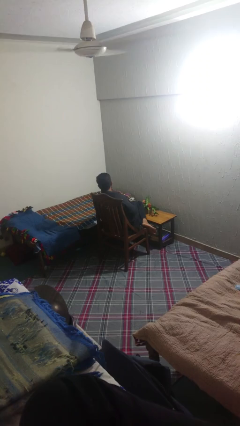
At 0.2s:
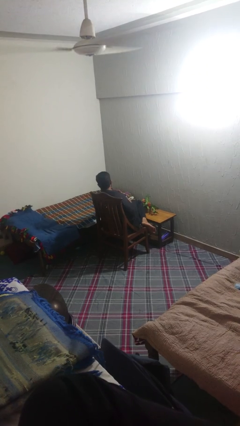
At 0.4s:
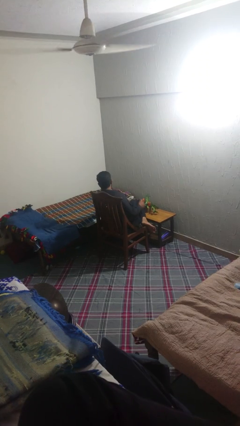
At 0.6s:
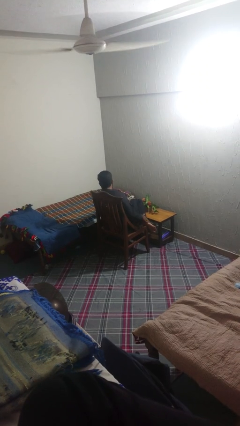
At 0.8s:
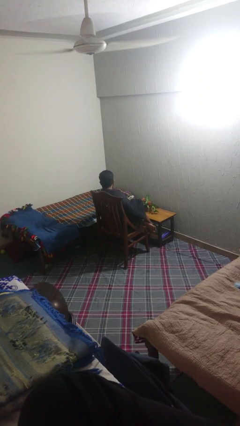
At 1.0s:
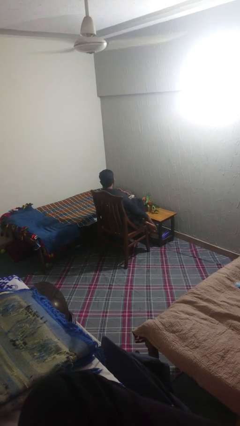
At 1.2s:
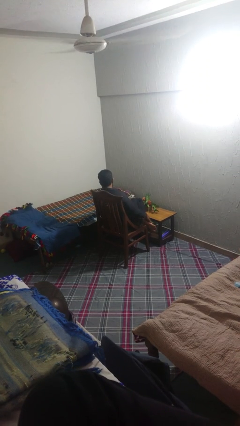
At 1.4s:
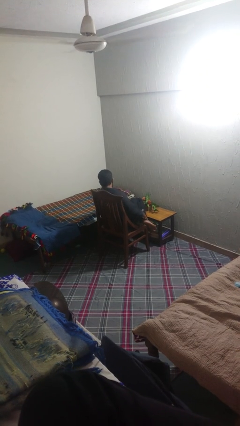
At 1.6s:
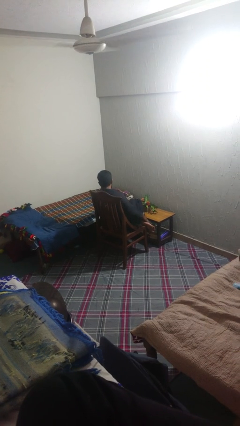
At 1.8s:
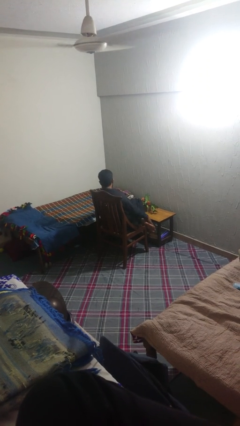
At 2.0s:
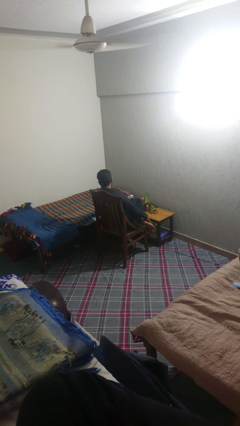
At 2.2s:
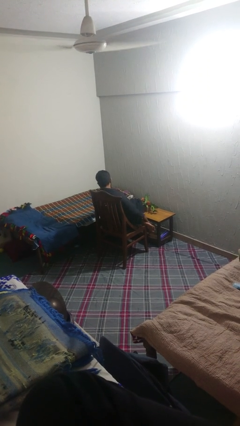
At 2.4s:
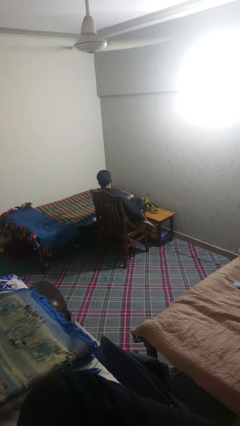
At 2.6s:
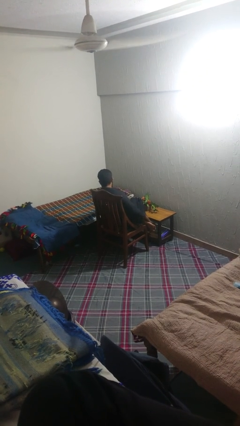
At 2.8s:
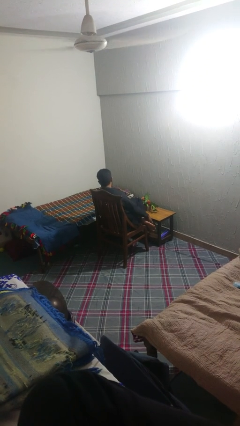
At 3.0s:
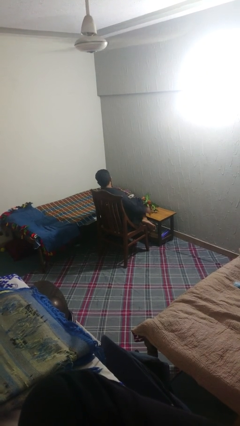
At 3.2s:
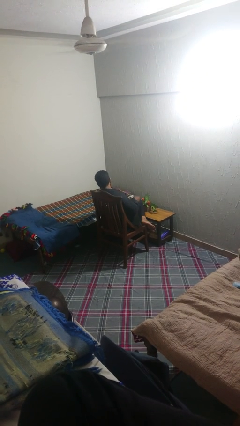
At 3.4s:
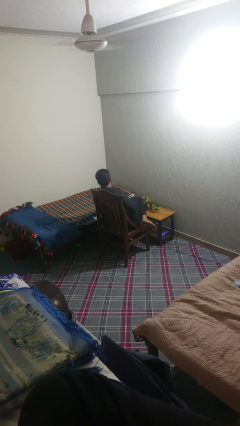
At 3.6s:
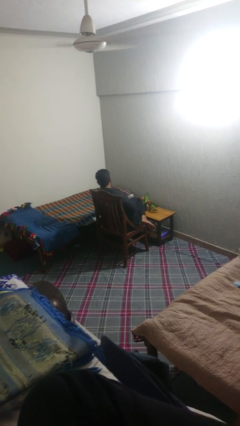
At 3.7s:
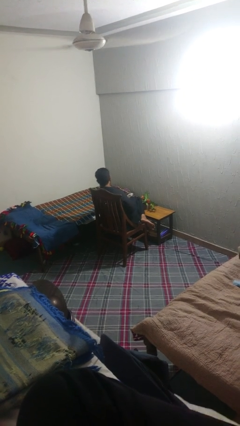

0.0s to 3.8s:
person rubs foot

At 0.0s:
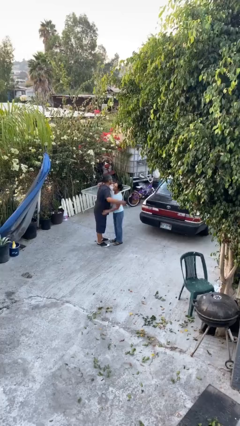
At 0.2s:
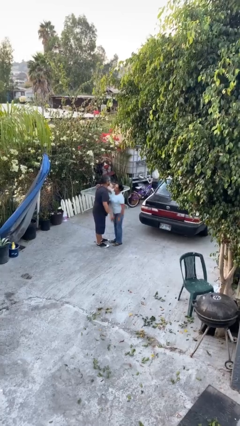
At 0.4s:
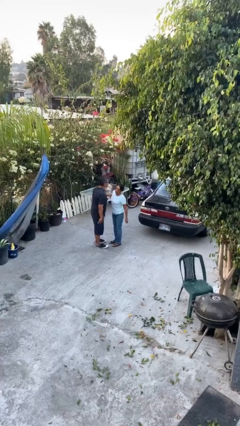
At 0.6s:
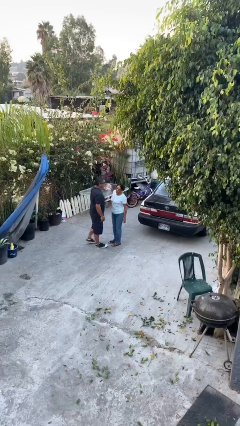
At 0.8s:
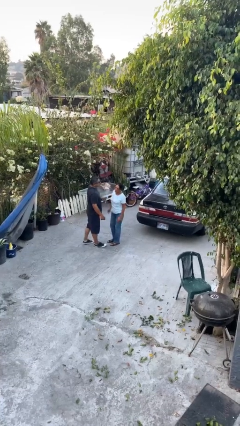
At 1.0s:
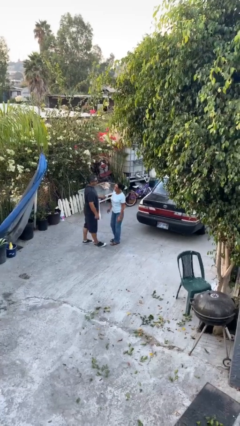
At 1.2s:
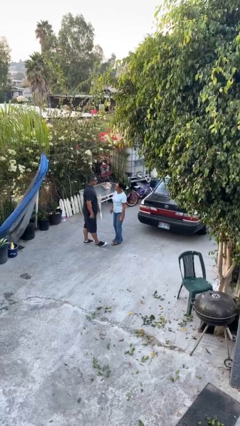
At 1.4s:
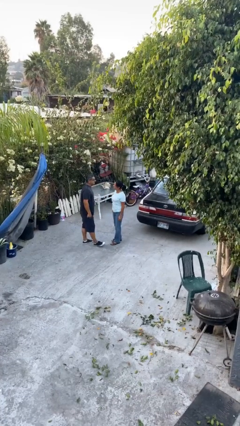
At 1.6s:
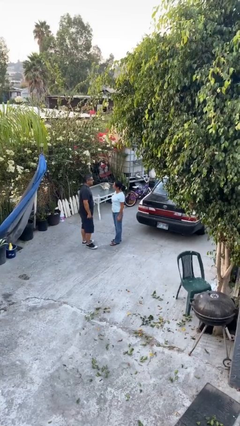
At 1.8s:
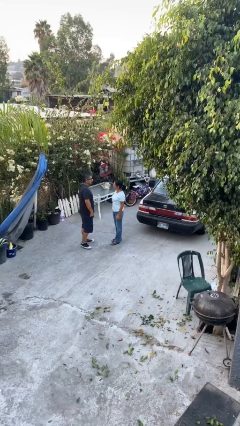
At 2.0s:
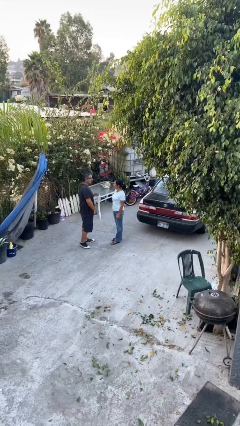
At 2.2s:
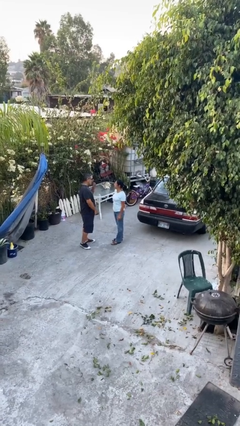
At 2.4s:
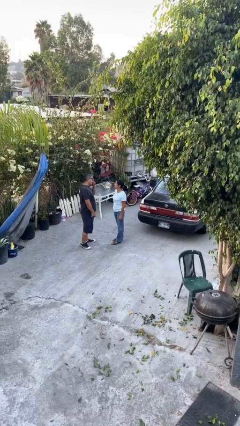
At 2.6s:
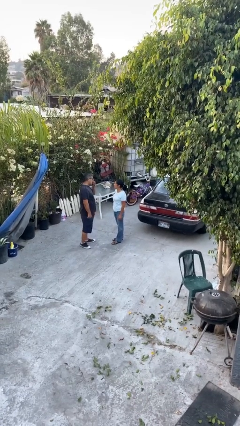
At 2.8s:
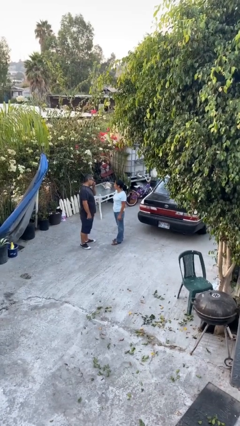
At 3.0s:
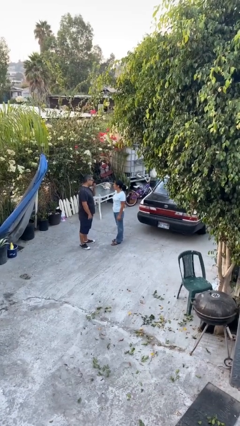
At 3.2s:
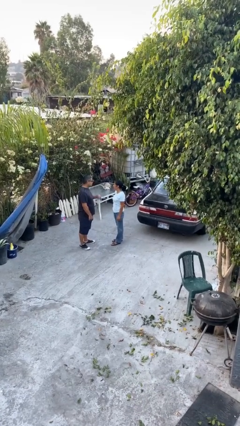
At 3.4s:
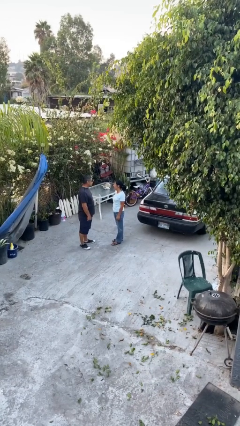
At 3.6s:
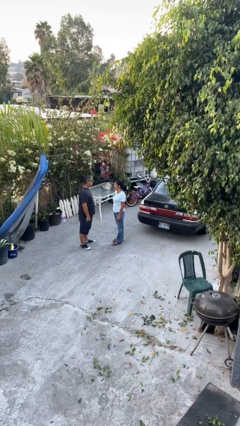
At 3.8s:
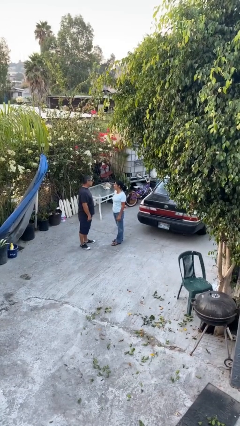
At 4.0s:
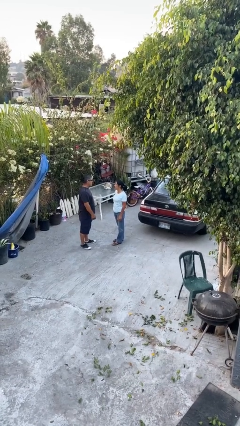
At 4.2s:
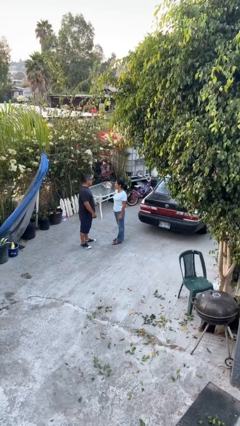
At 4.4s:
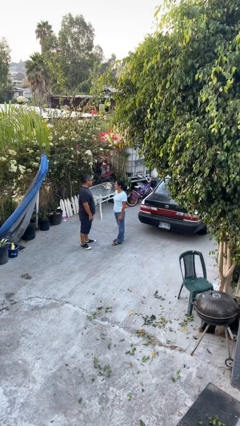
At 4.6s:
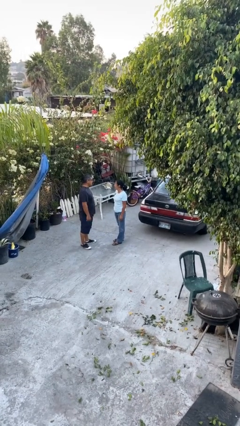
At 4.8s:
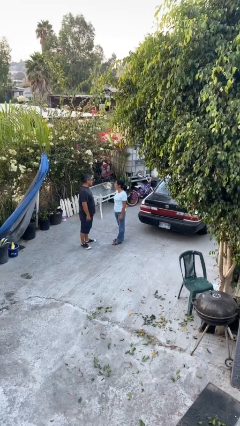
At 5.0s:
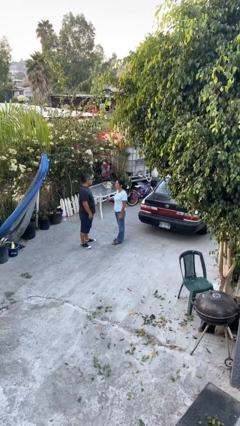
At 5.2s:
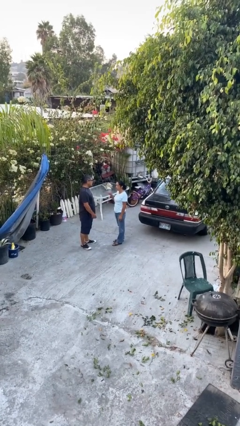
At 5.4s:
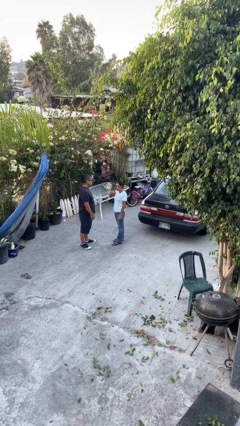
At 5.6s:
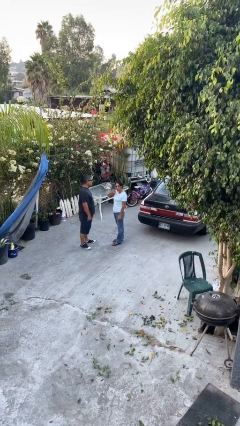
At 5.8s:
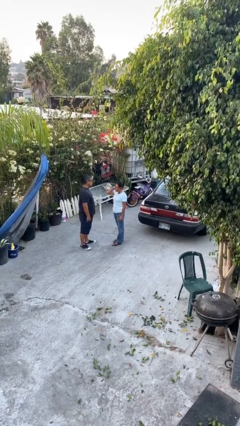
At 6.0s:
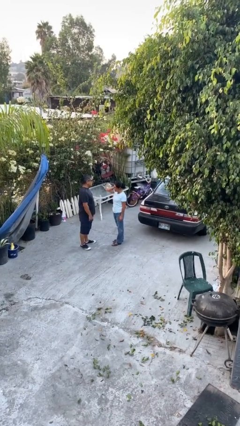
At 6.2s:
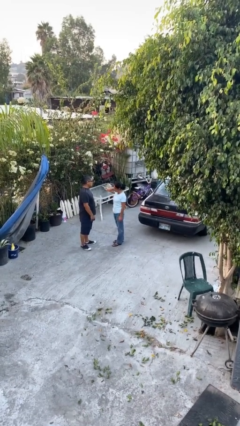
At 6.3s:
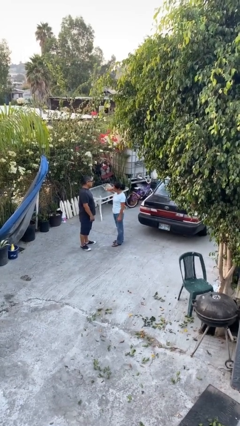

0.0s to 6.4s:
person talks to person

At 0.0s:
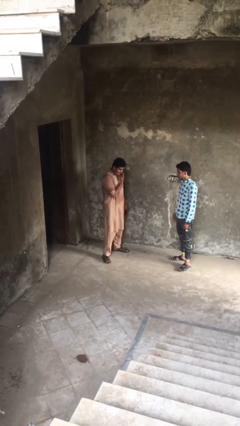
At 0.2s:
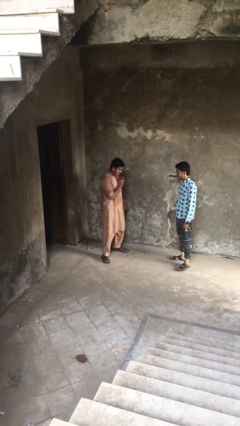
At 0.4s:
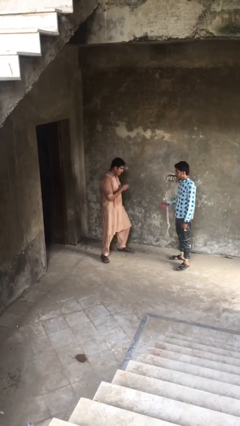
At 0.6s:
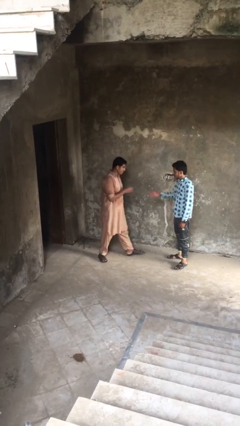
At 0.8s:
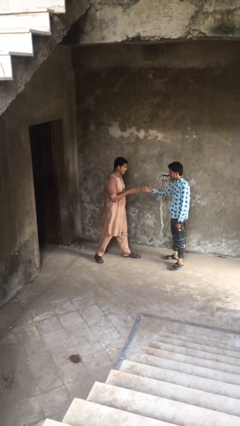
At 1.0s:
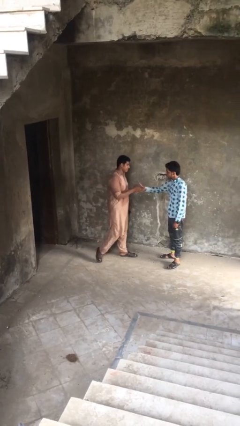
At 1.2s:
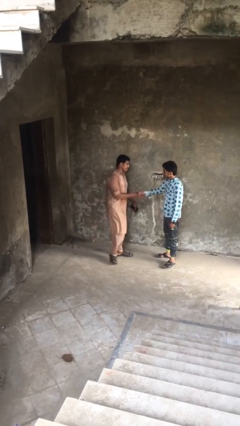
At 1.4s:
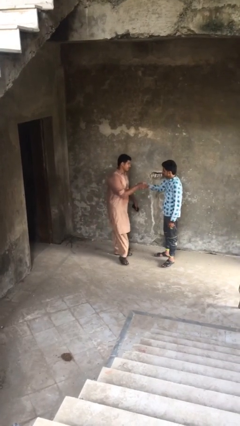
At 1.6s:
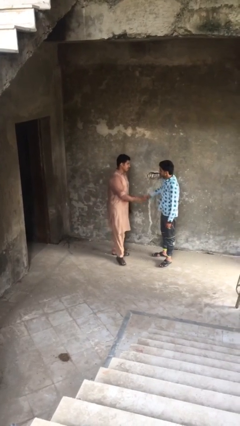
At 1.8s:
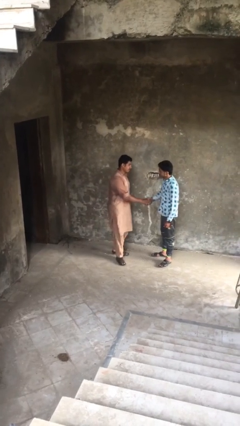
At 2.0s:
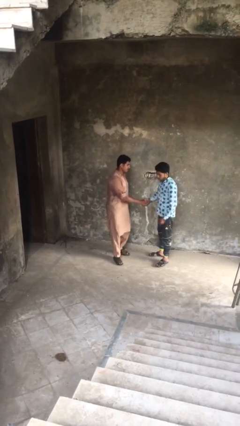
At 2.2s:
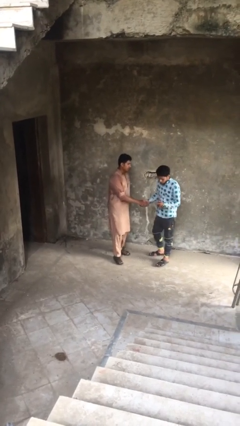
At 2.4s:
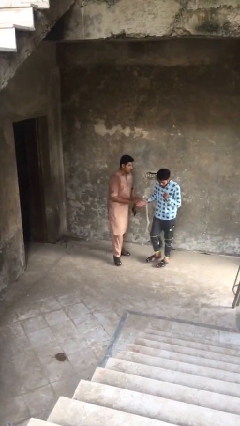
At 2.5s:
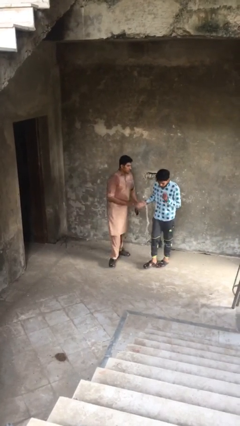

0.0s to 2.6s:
person shakes hand

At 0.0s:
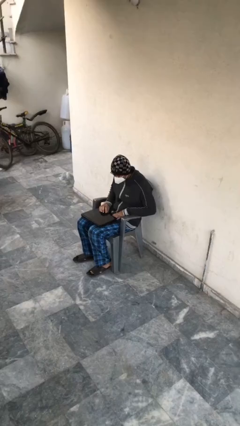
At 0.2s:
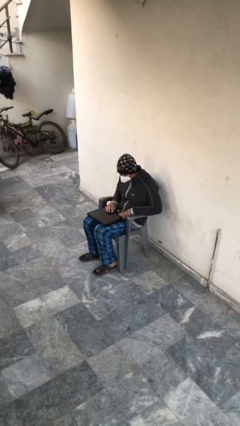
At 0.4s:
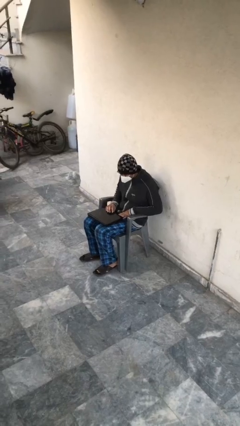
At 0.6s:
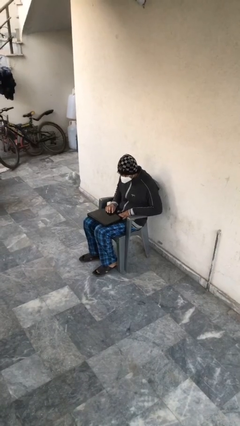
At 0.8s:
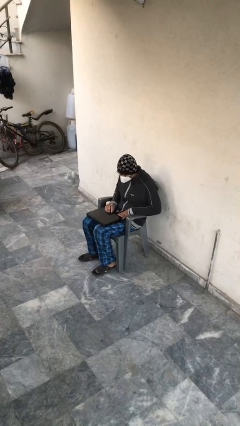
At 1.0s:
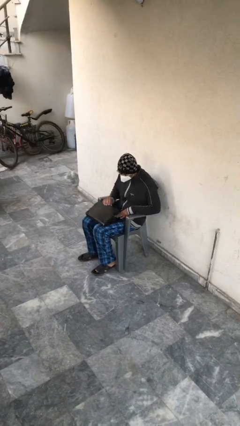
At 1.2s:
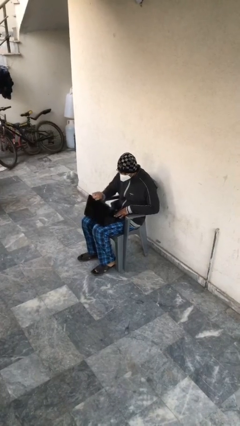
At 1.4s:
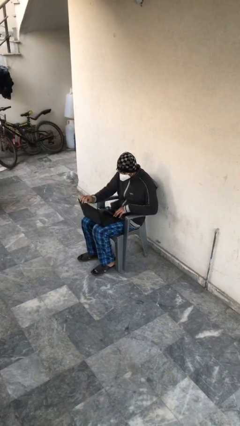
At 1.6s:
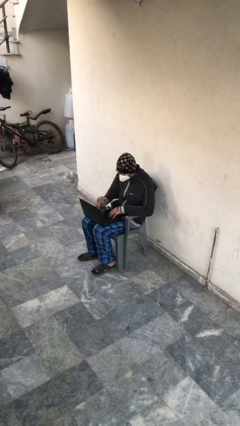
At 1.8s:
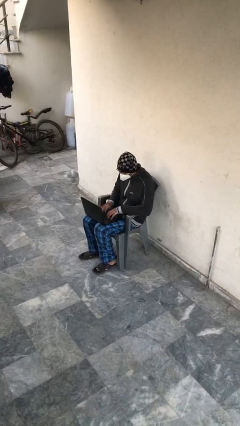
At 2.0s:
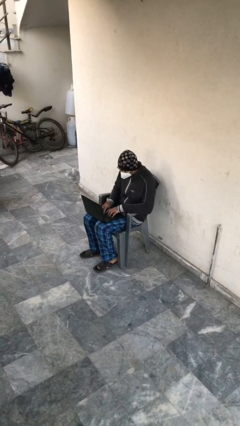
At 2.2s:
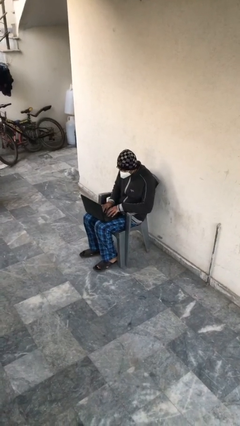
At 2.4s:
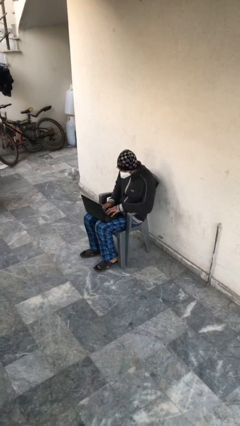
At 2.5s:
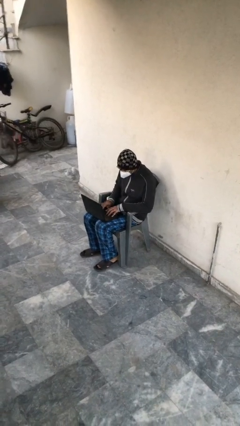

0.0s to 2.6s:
person interacts with laptop

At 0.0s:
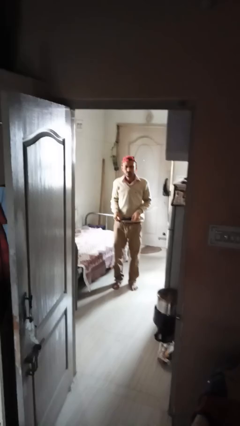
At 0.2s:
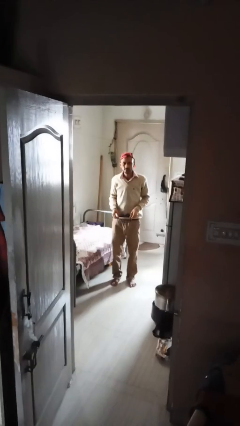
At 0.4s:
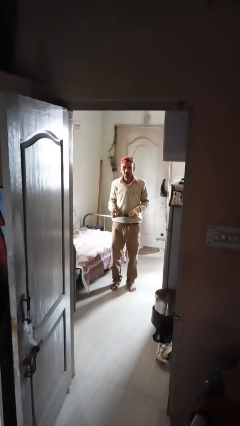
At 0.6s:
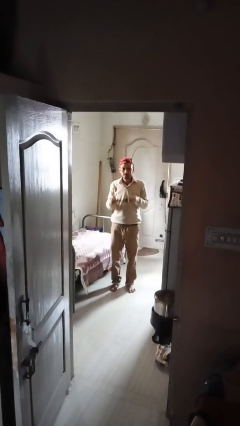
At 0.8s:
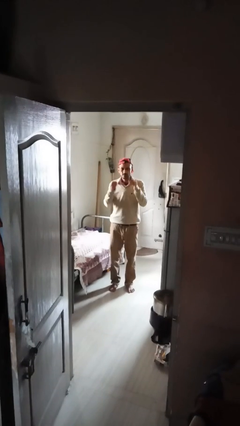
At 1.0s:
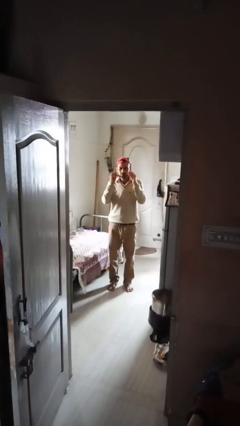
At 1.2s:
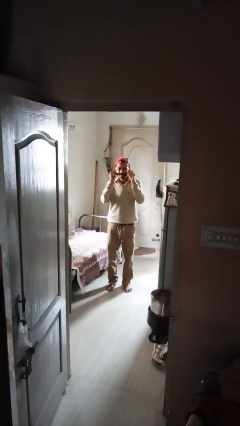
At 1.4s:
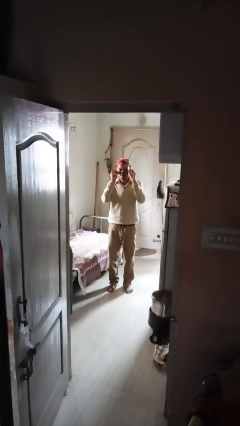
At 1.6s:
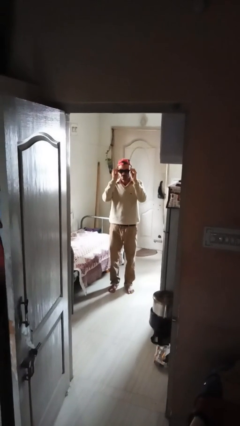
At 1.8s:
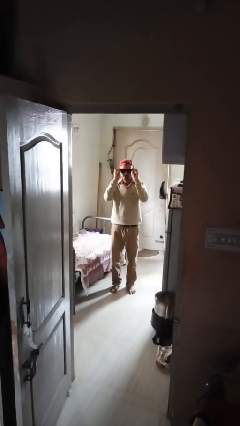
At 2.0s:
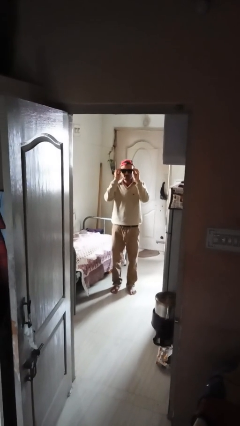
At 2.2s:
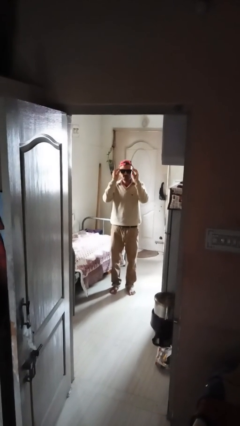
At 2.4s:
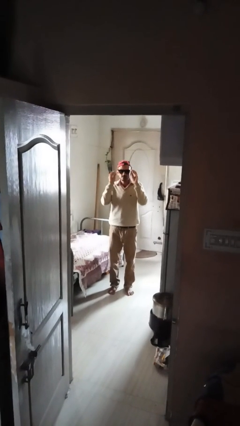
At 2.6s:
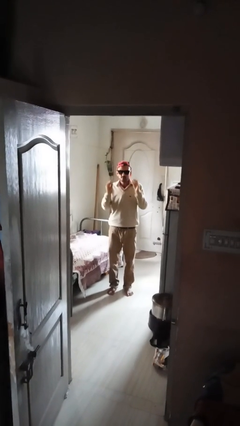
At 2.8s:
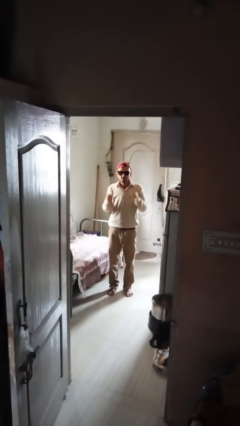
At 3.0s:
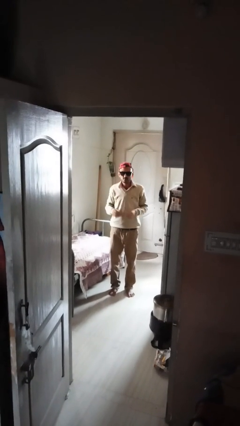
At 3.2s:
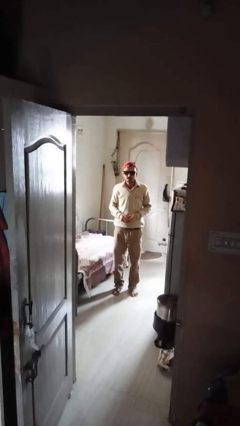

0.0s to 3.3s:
person puts on sunglasses
